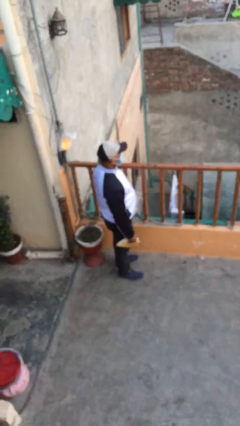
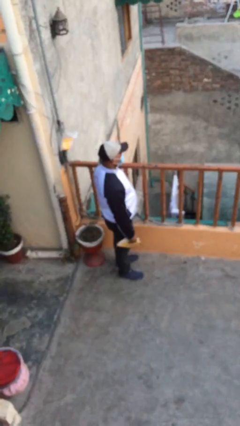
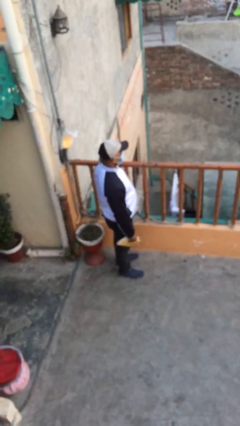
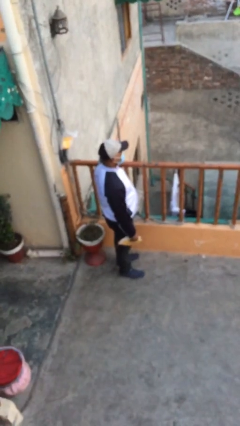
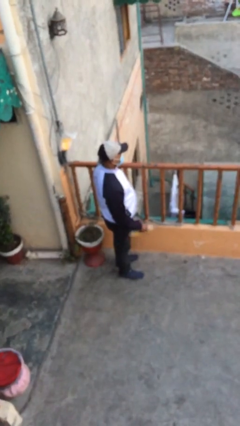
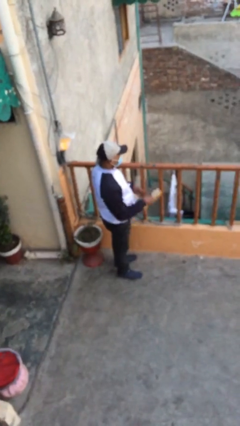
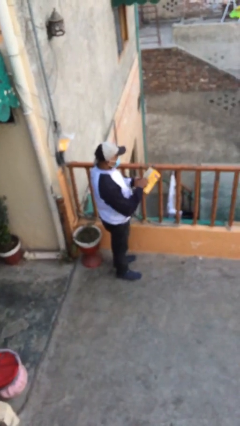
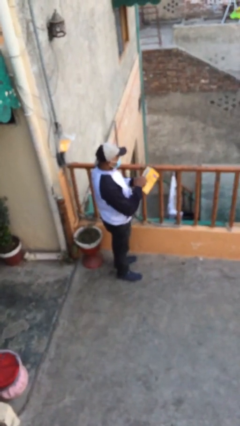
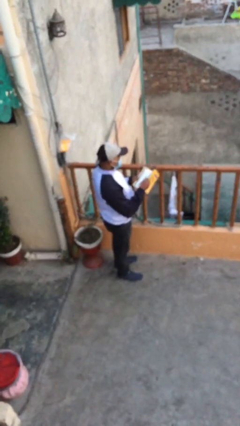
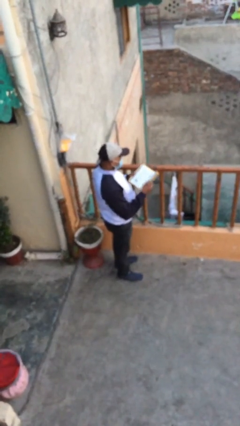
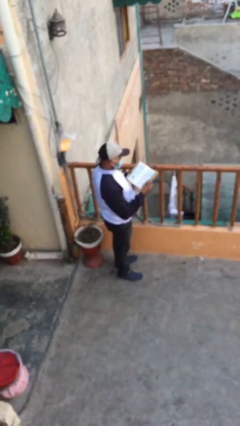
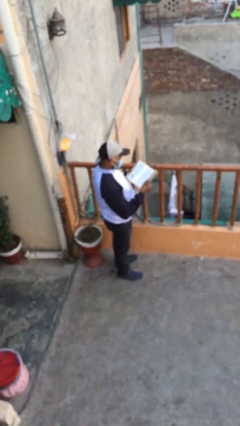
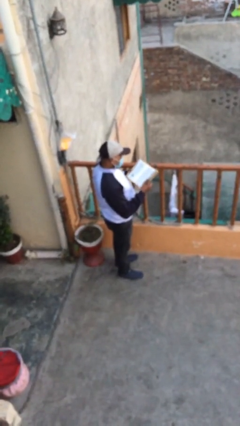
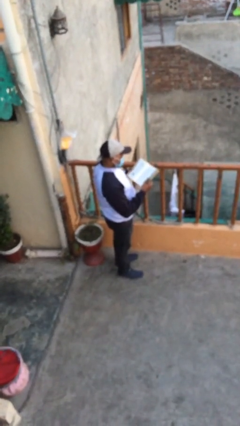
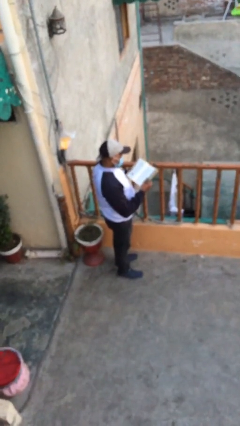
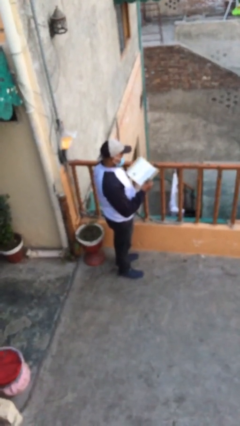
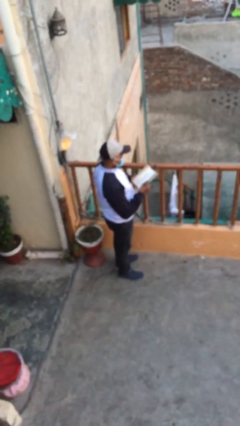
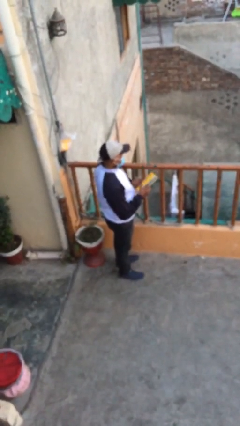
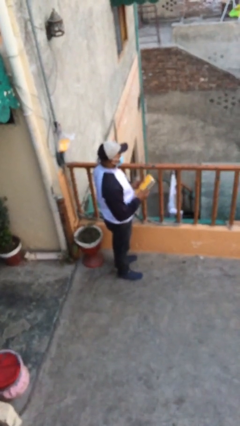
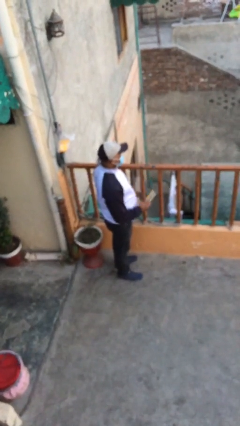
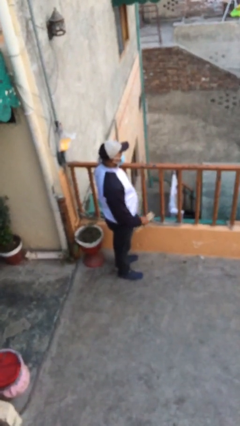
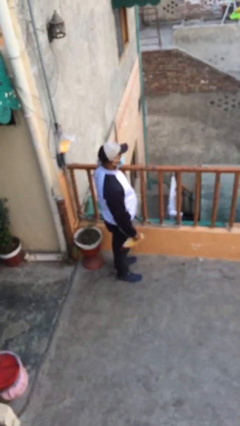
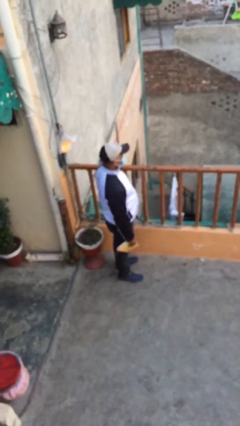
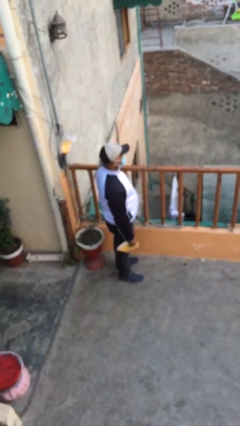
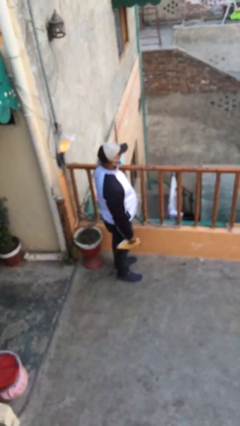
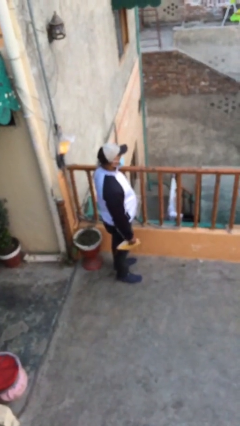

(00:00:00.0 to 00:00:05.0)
person reads document

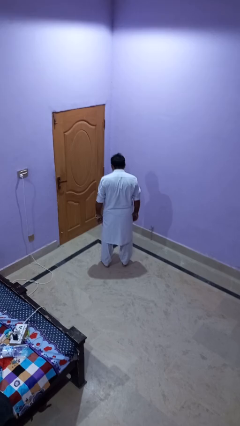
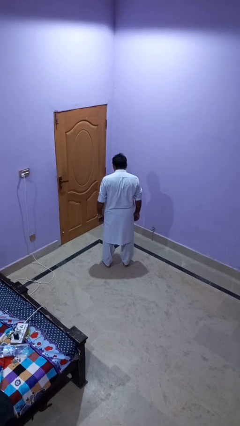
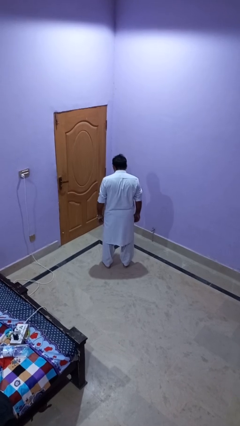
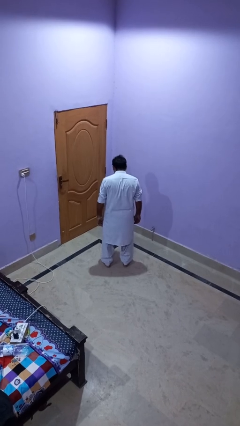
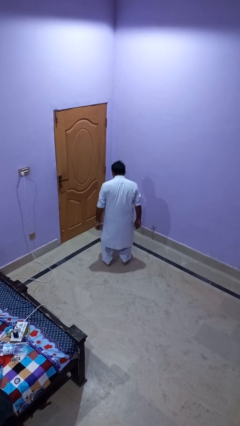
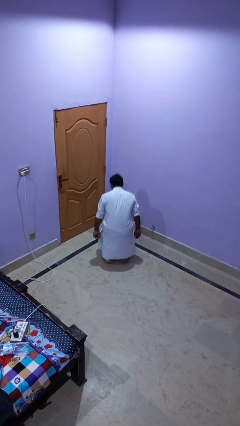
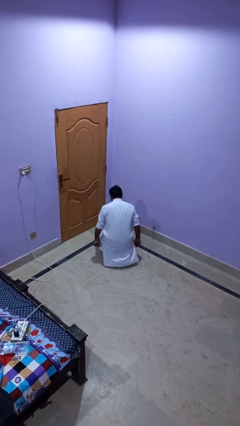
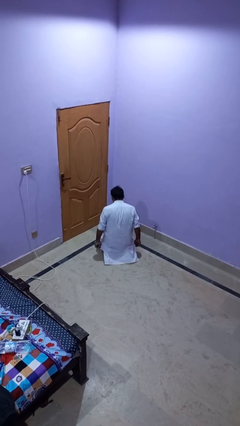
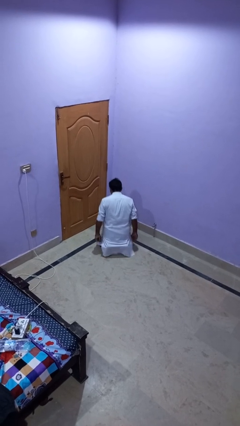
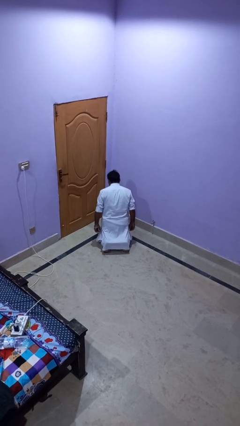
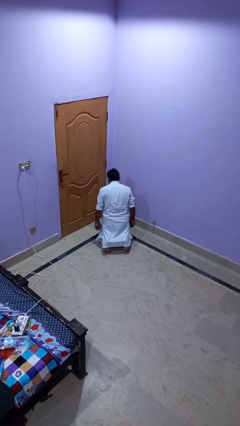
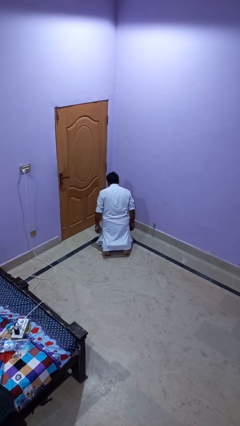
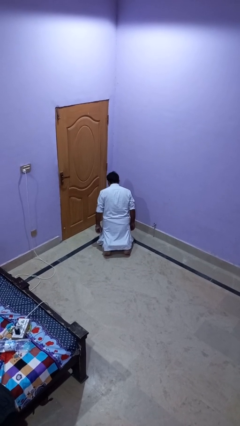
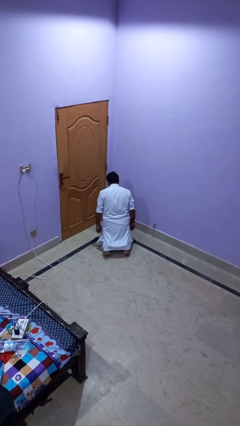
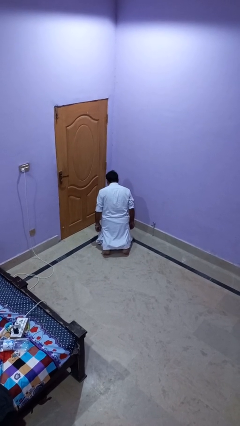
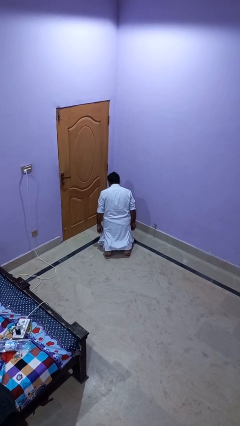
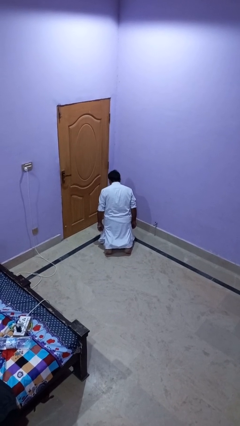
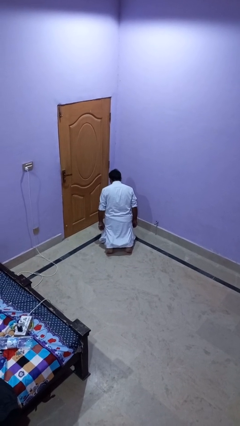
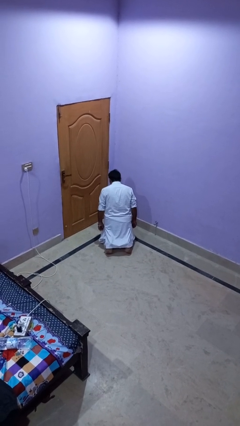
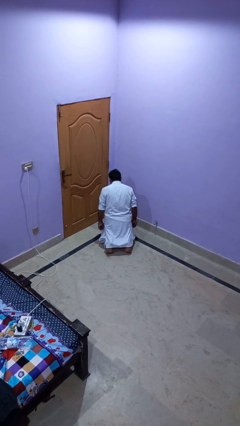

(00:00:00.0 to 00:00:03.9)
person kneels

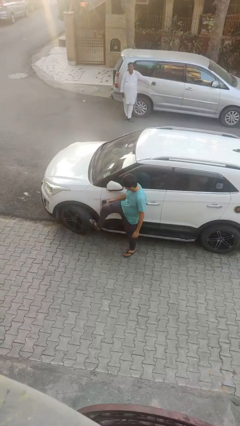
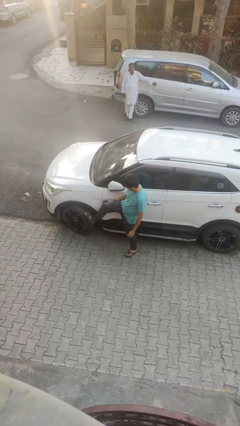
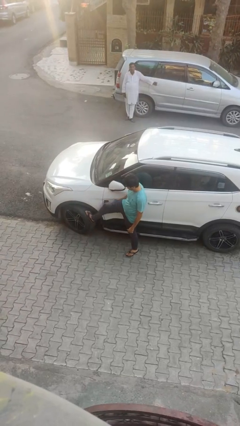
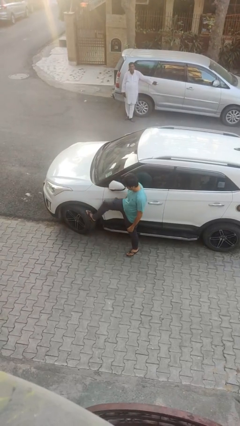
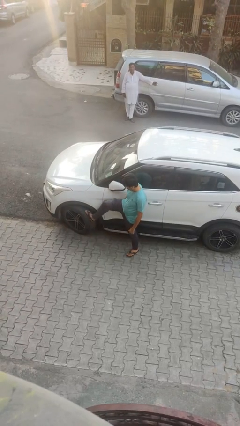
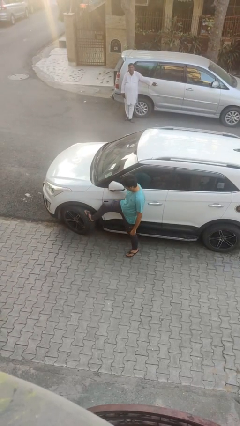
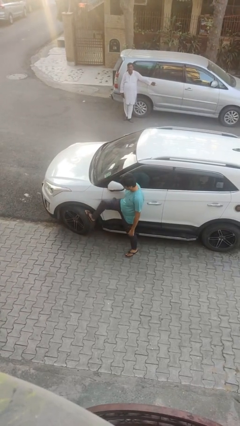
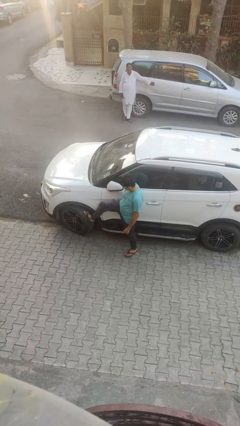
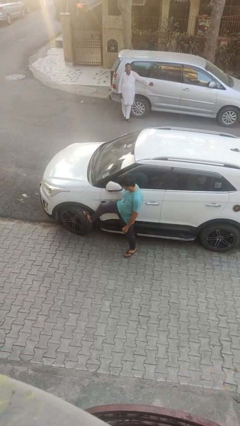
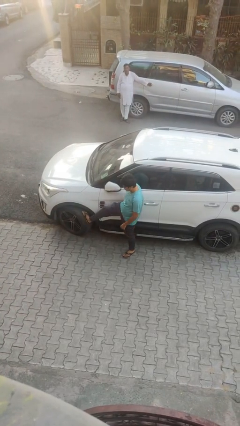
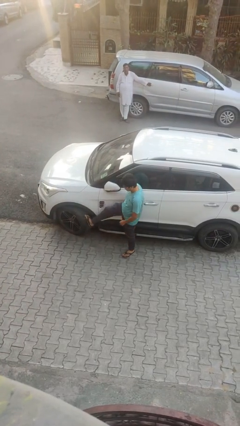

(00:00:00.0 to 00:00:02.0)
person kicks car tires

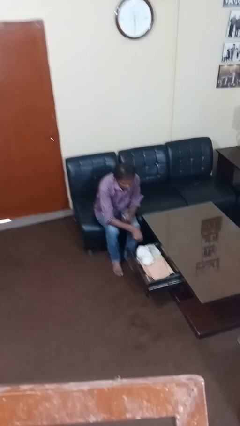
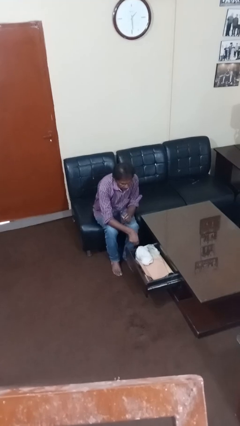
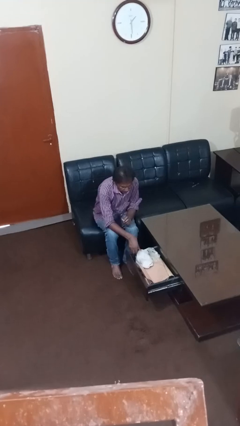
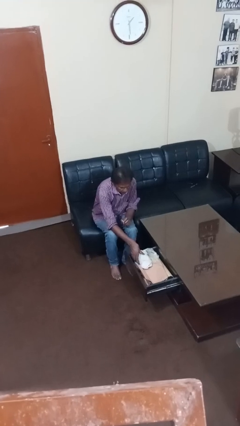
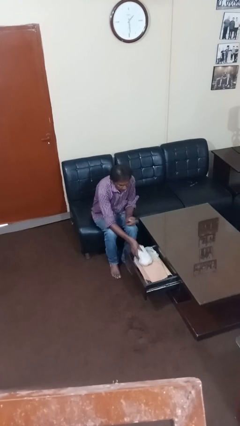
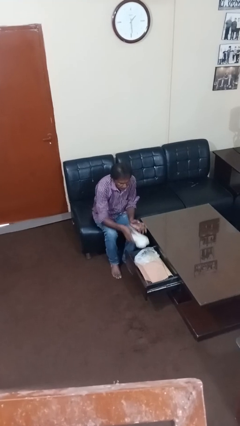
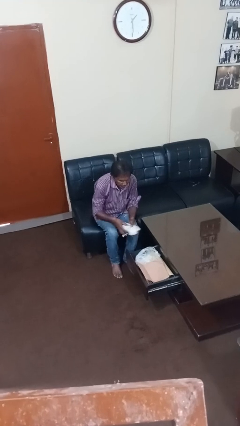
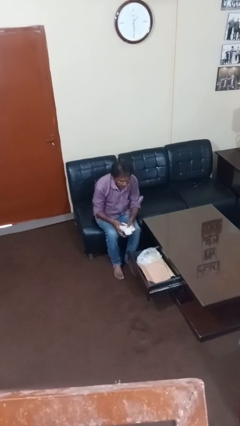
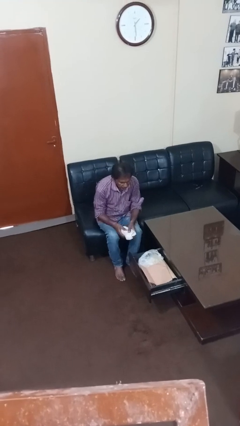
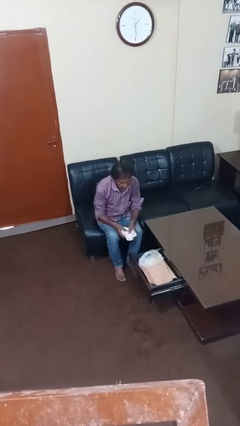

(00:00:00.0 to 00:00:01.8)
person takes clothes from dresser

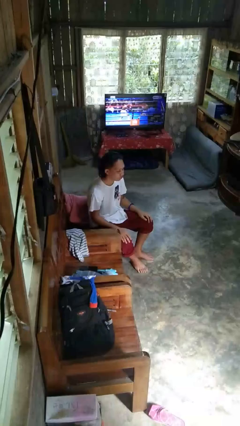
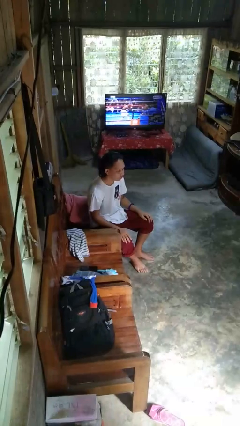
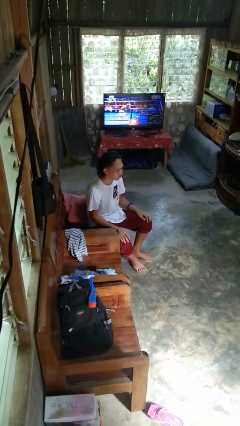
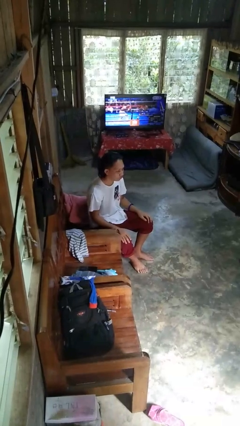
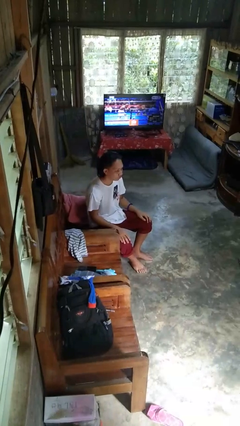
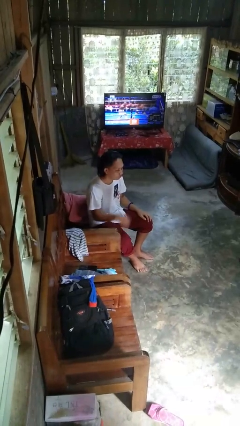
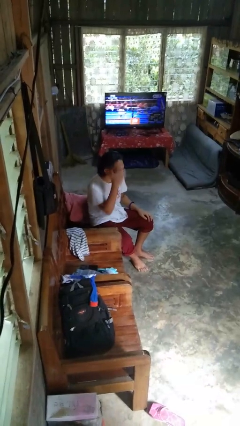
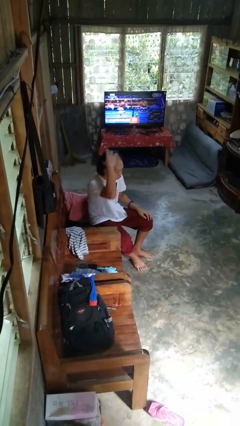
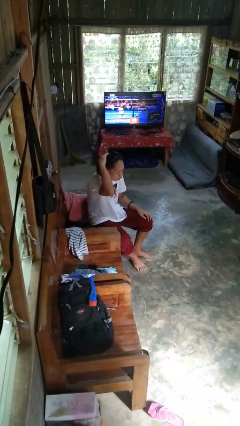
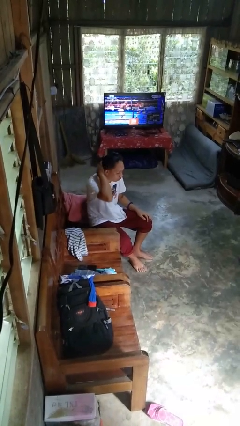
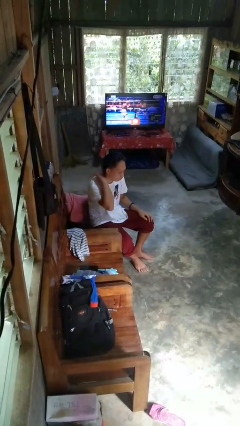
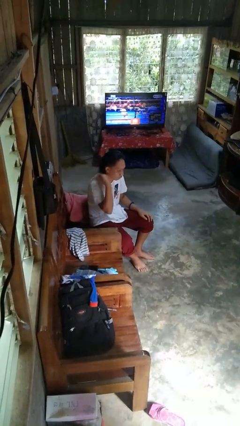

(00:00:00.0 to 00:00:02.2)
person strokes hair

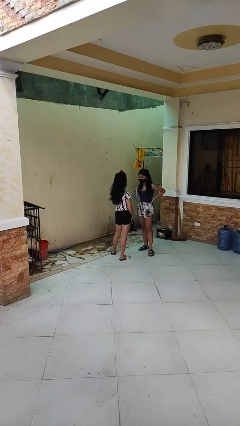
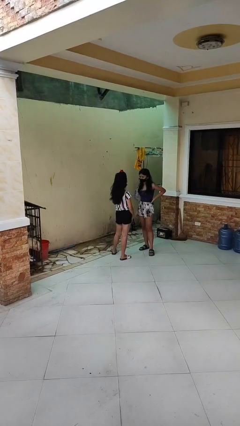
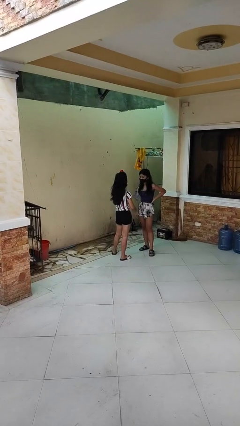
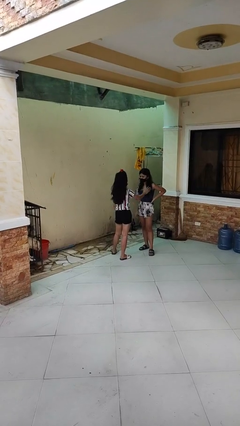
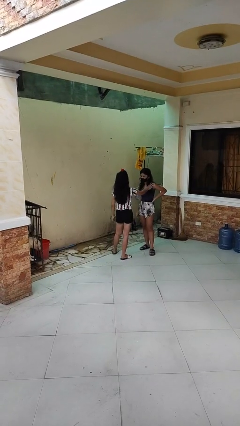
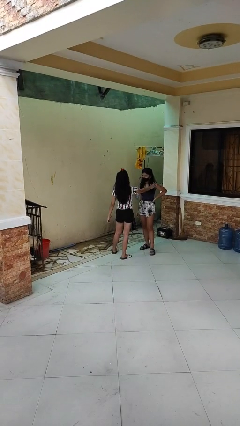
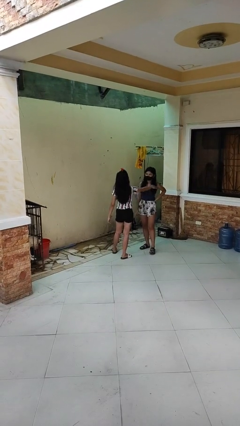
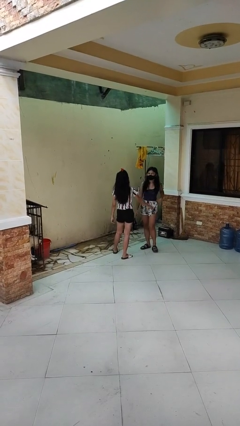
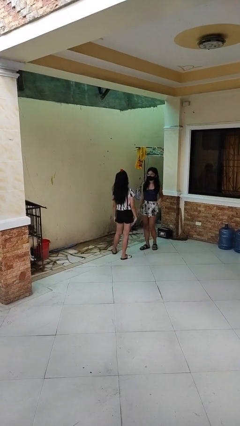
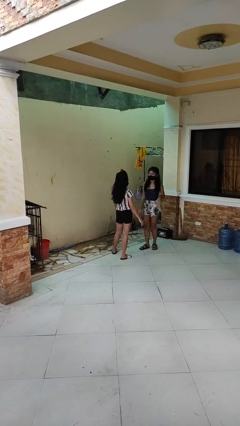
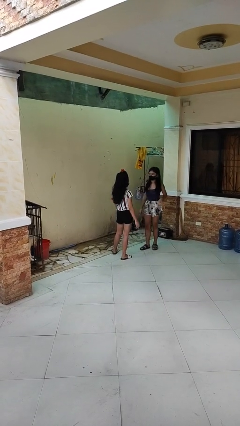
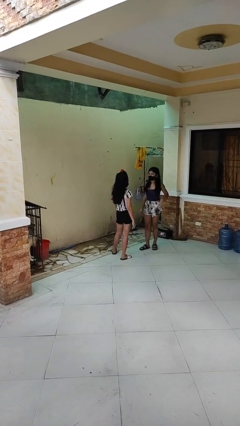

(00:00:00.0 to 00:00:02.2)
person shoves person

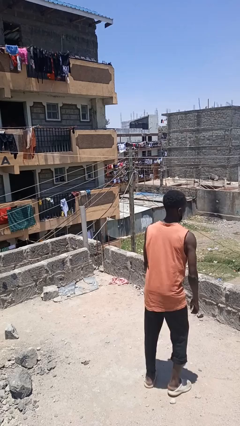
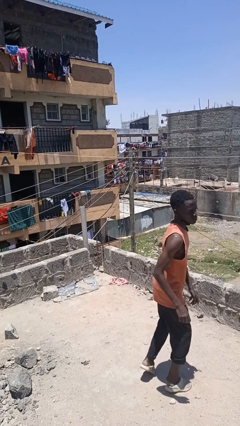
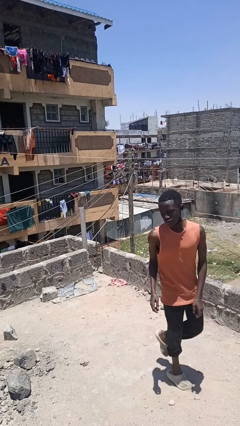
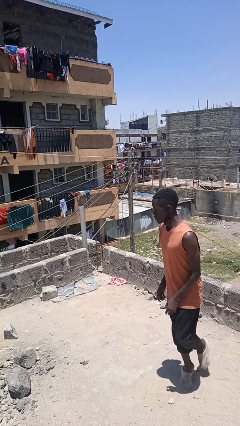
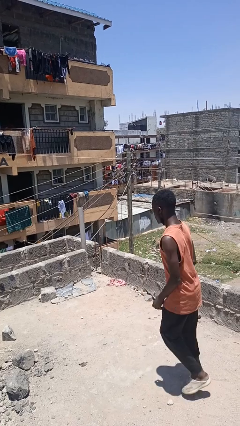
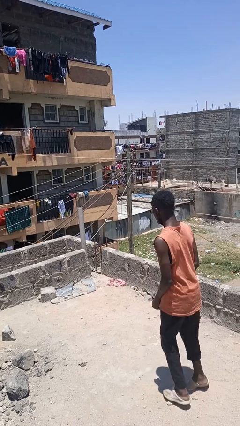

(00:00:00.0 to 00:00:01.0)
person twirls
